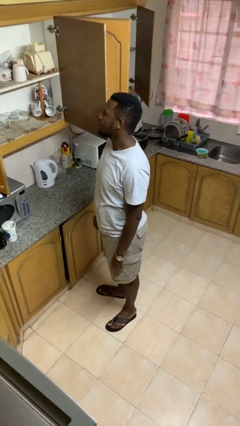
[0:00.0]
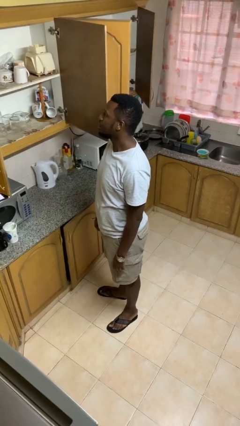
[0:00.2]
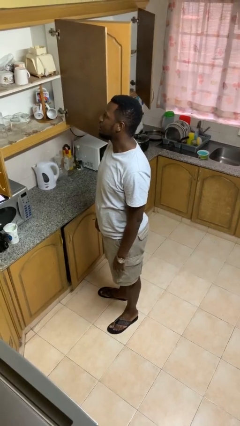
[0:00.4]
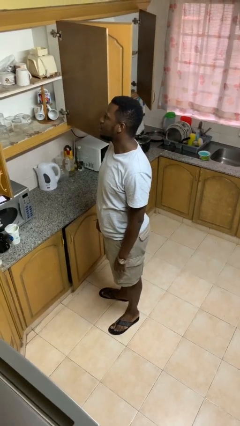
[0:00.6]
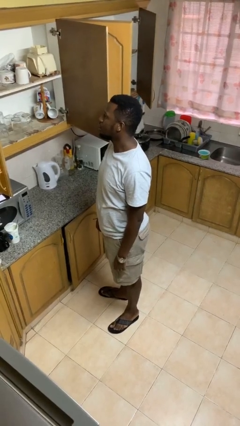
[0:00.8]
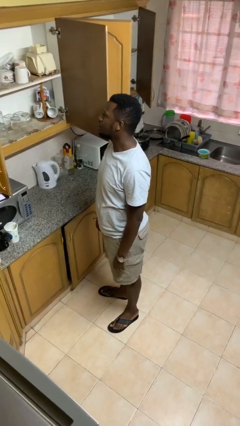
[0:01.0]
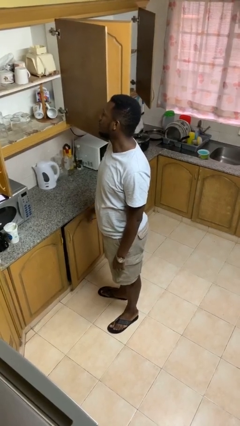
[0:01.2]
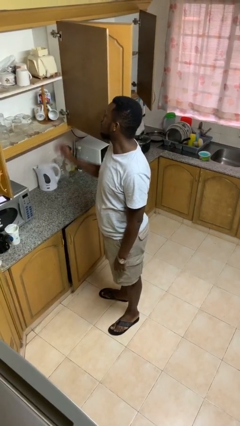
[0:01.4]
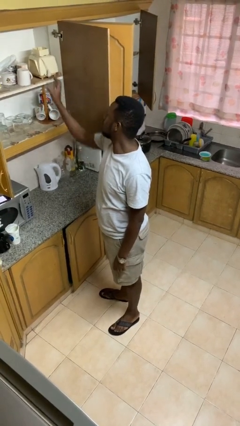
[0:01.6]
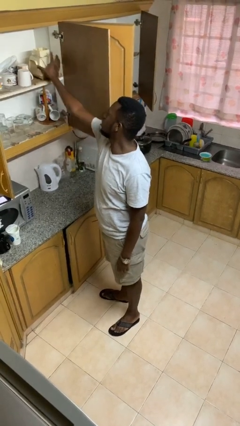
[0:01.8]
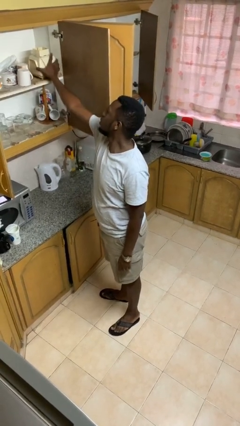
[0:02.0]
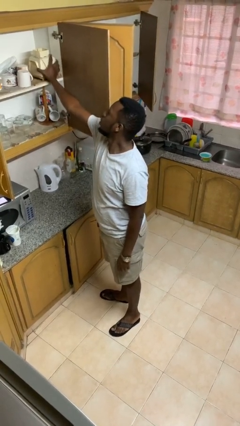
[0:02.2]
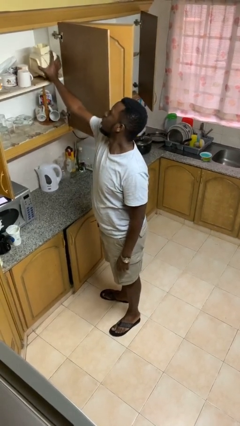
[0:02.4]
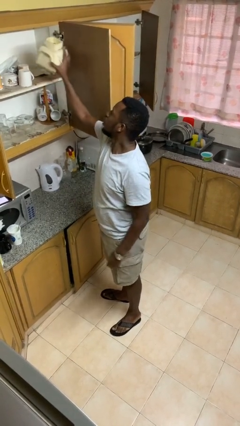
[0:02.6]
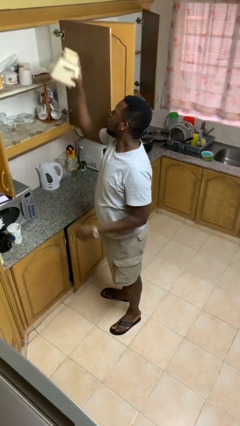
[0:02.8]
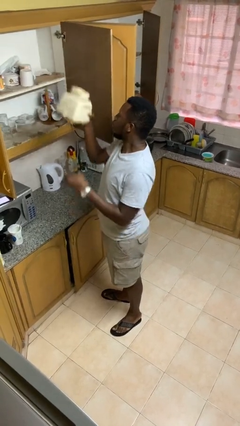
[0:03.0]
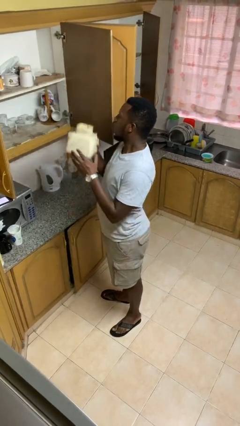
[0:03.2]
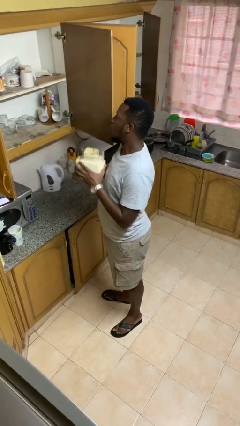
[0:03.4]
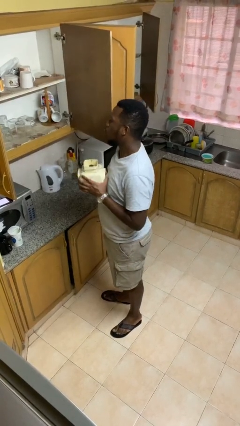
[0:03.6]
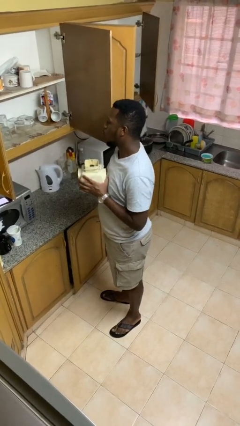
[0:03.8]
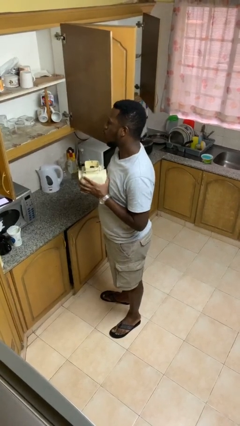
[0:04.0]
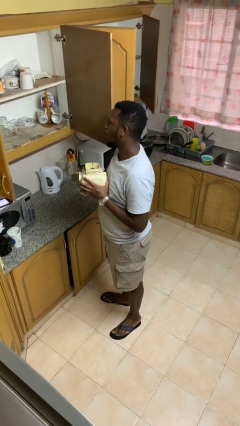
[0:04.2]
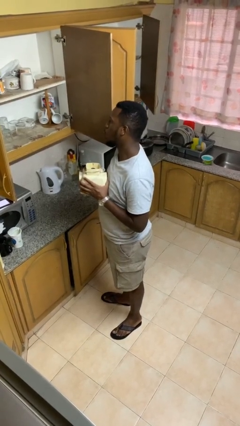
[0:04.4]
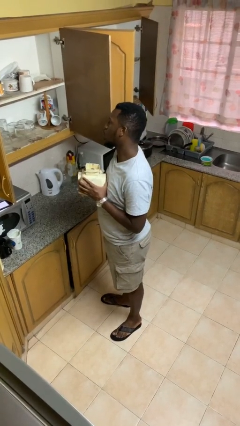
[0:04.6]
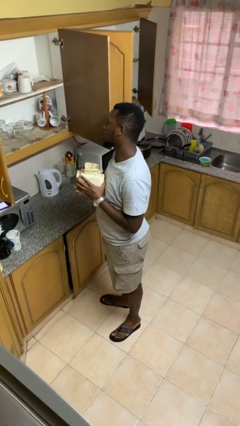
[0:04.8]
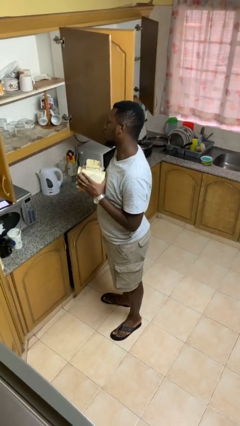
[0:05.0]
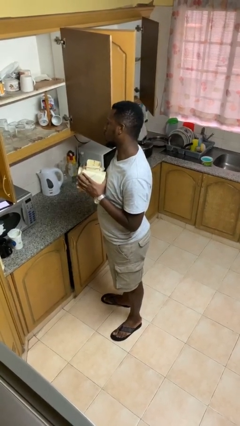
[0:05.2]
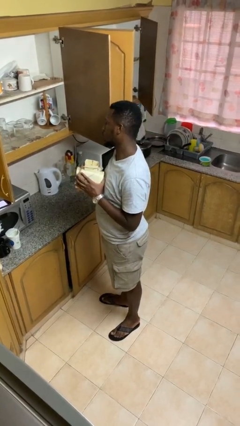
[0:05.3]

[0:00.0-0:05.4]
person picks up object from shelf

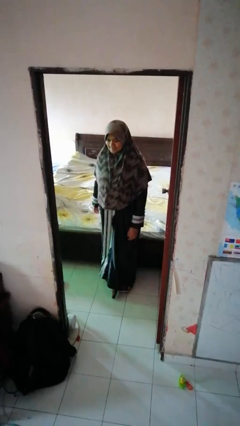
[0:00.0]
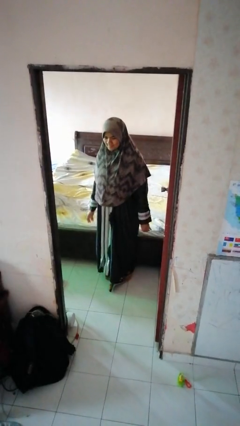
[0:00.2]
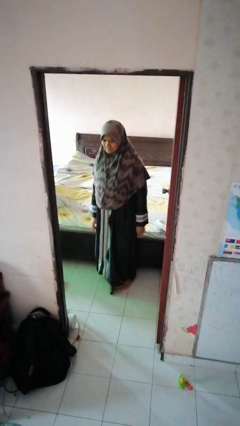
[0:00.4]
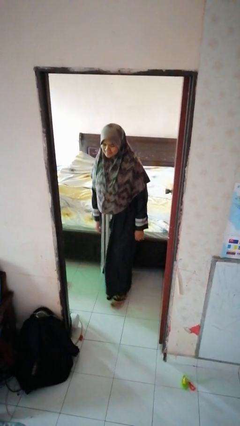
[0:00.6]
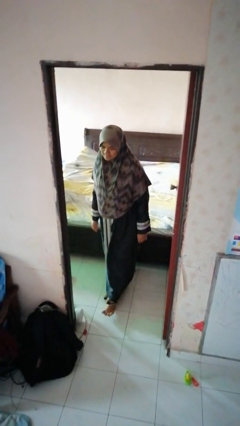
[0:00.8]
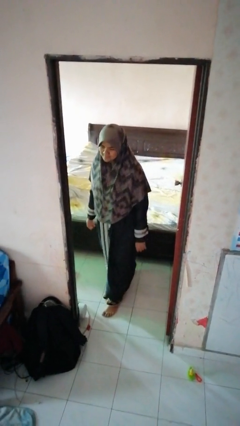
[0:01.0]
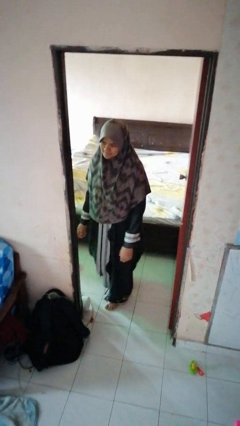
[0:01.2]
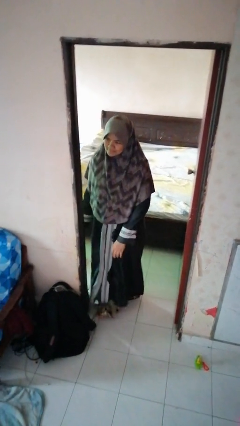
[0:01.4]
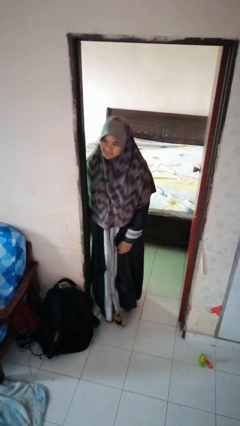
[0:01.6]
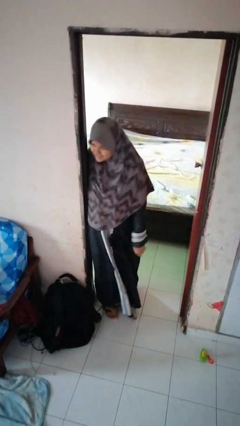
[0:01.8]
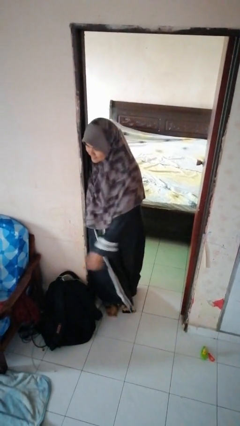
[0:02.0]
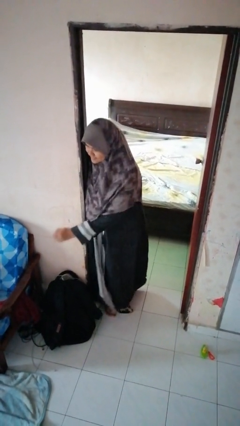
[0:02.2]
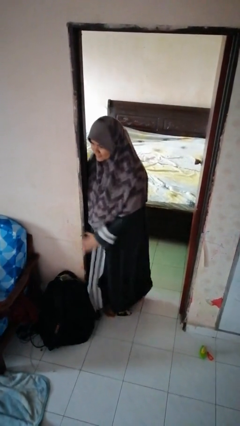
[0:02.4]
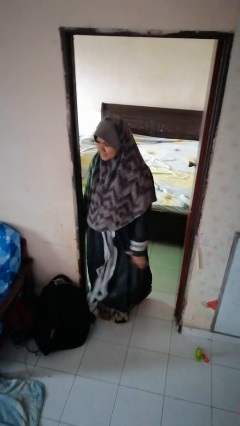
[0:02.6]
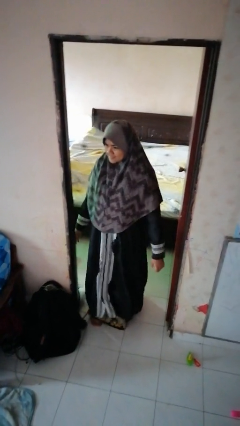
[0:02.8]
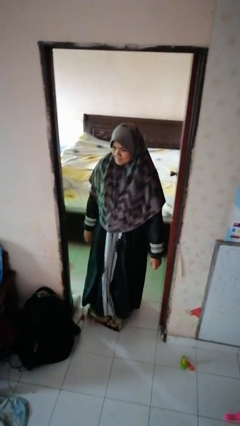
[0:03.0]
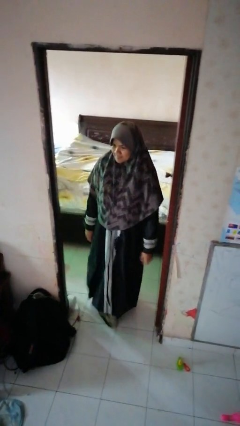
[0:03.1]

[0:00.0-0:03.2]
person bumps into wall

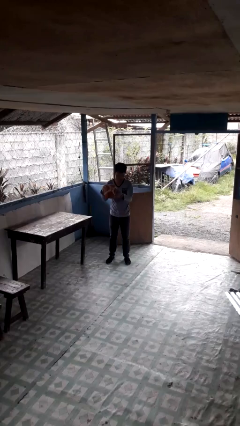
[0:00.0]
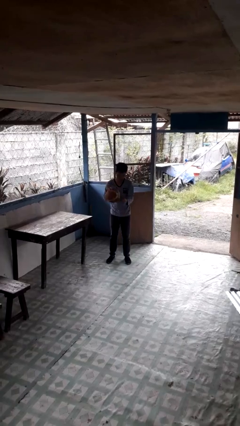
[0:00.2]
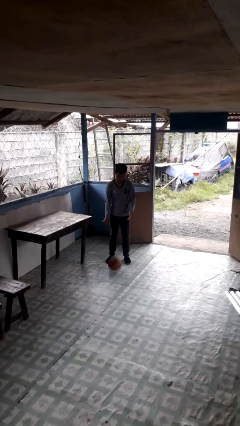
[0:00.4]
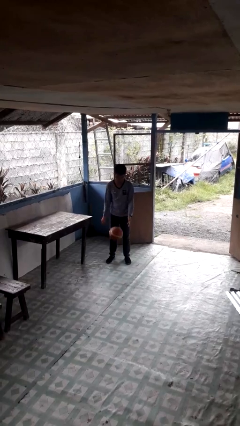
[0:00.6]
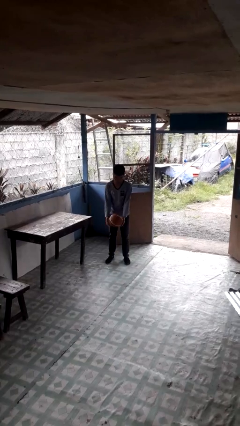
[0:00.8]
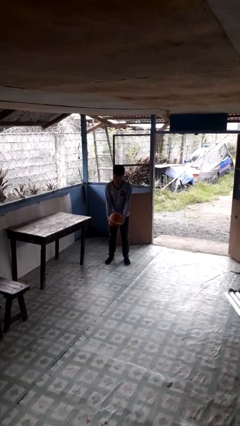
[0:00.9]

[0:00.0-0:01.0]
person bounces ball on floor

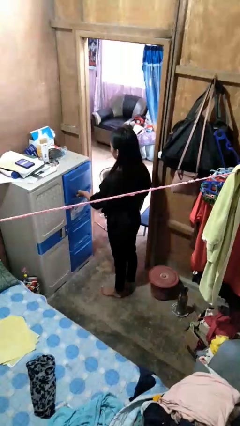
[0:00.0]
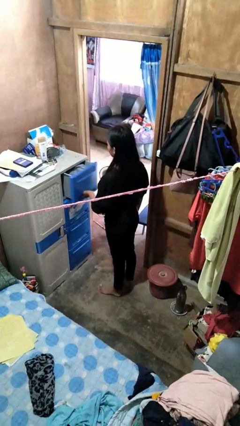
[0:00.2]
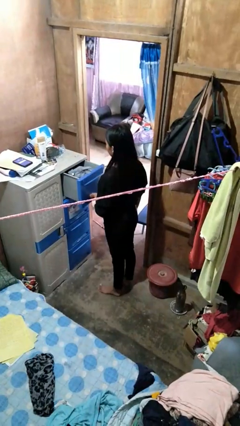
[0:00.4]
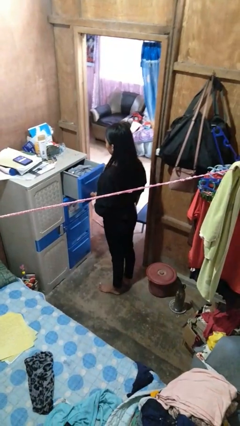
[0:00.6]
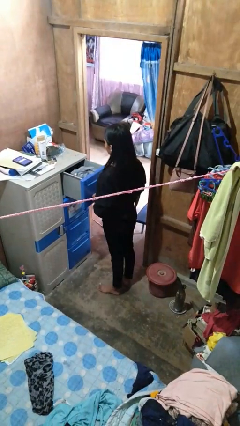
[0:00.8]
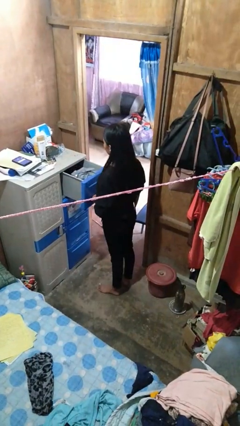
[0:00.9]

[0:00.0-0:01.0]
person opens dresser drawer

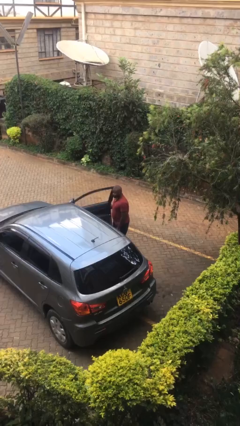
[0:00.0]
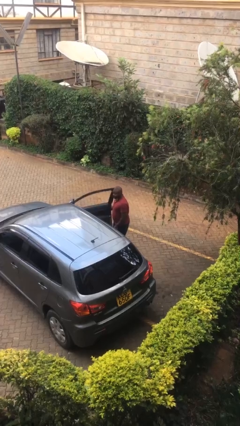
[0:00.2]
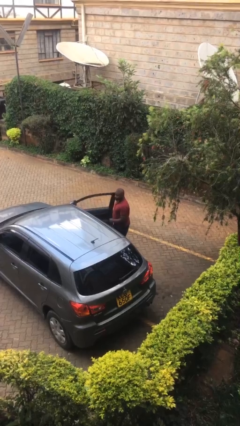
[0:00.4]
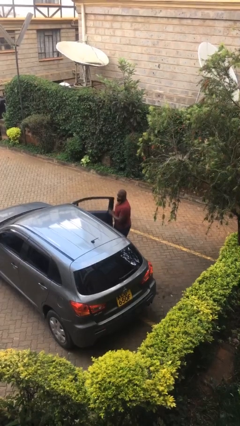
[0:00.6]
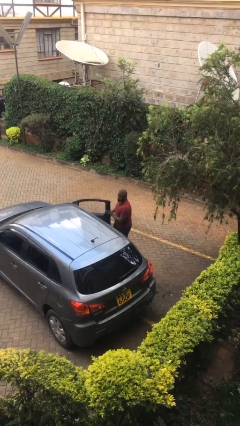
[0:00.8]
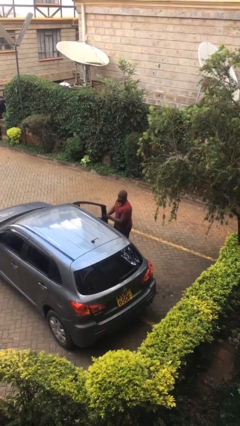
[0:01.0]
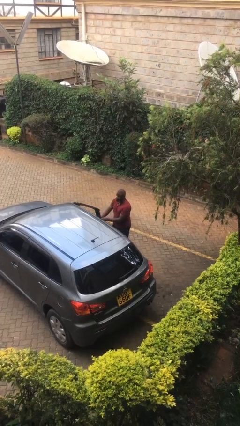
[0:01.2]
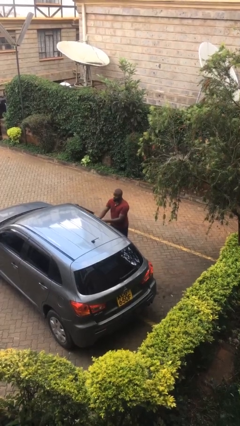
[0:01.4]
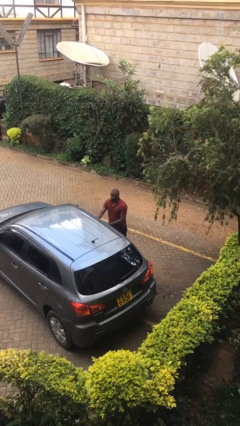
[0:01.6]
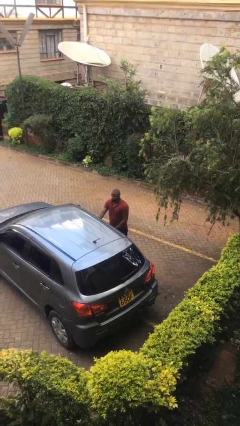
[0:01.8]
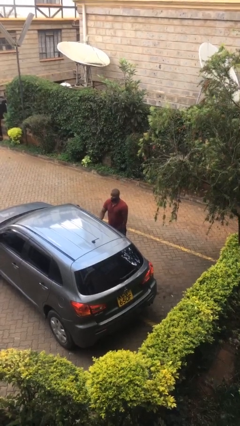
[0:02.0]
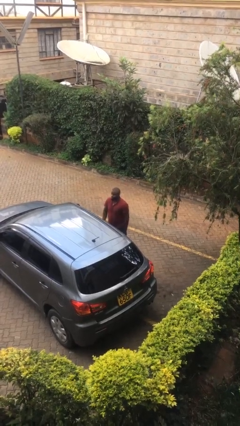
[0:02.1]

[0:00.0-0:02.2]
person closes car door

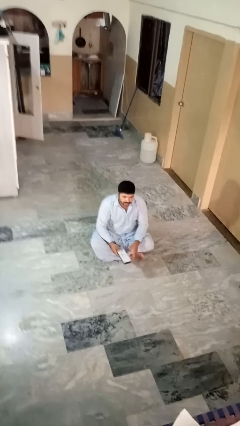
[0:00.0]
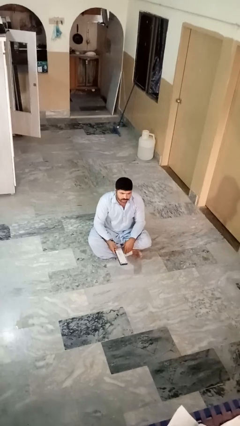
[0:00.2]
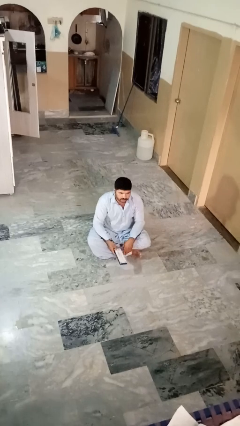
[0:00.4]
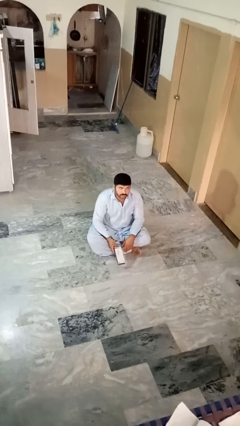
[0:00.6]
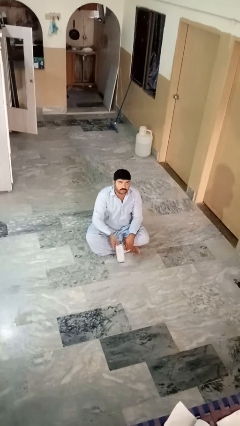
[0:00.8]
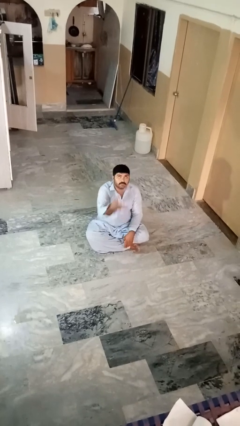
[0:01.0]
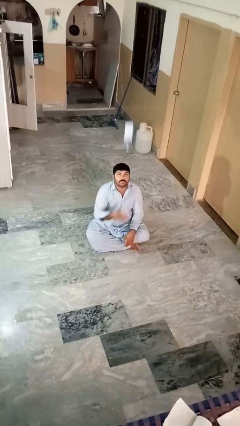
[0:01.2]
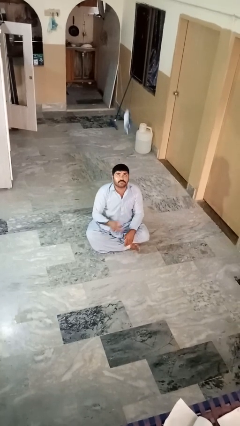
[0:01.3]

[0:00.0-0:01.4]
person drops object

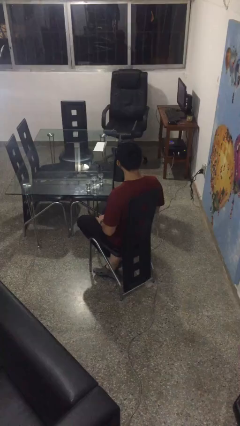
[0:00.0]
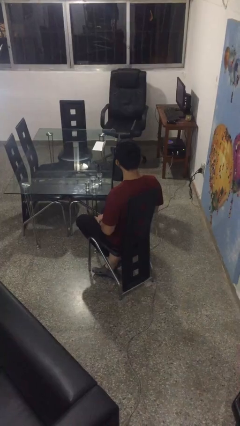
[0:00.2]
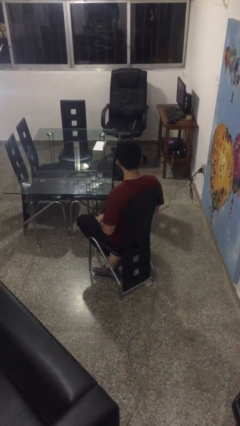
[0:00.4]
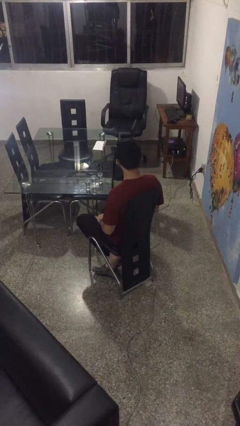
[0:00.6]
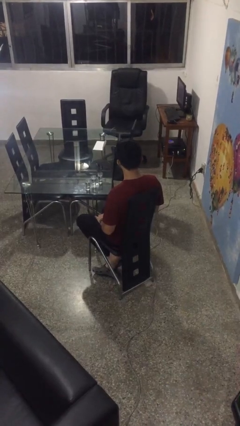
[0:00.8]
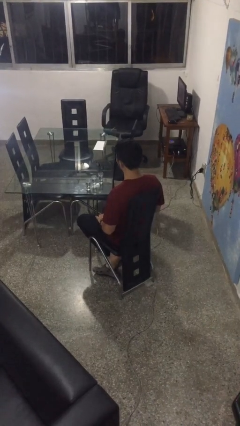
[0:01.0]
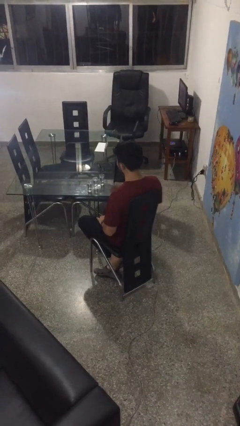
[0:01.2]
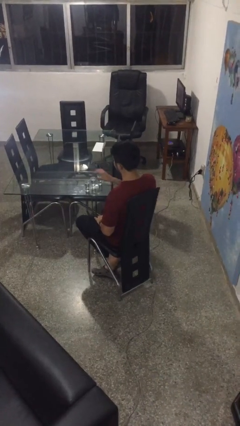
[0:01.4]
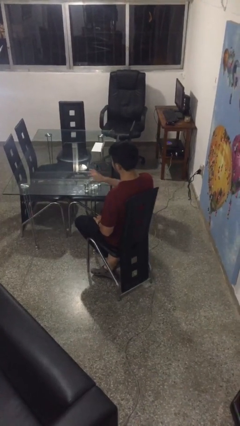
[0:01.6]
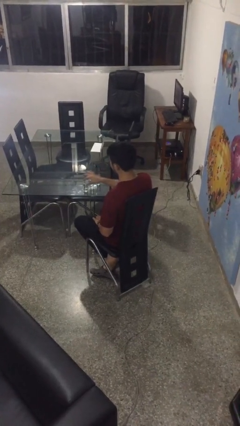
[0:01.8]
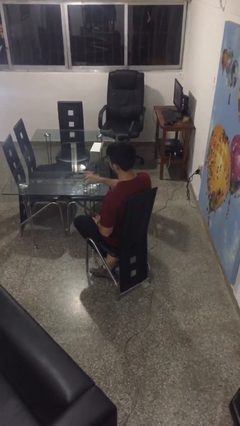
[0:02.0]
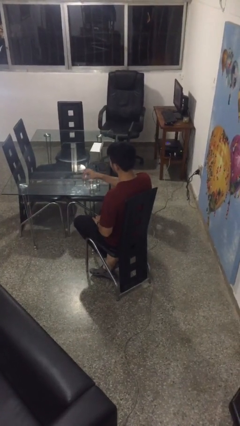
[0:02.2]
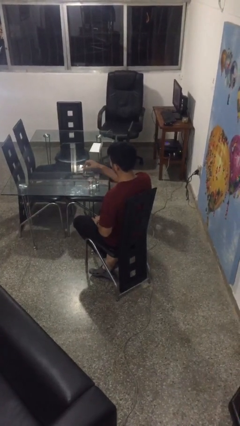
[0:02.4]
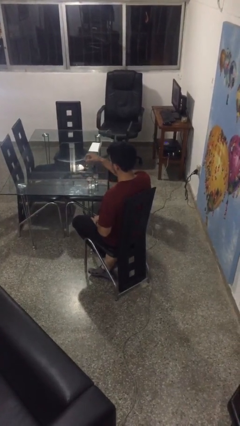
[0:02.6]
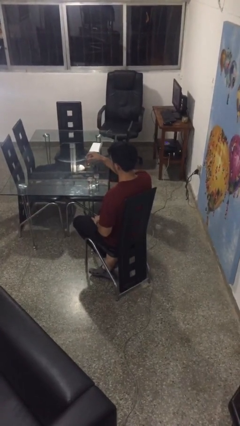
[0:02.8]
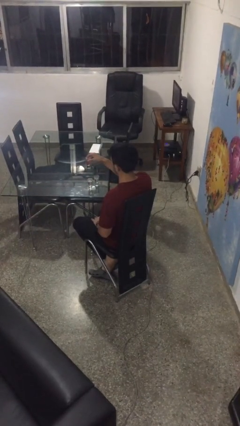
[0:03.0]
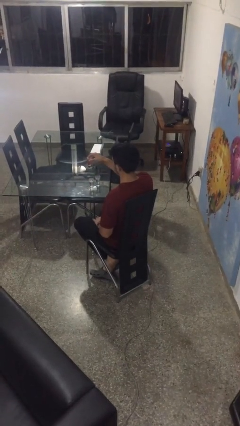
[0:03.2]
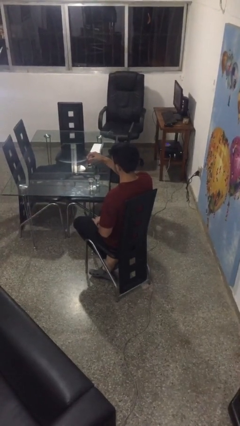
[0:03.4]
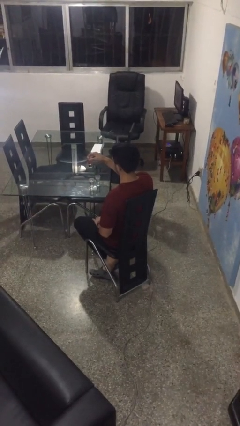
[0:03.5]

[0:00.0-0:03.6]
person picks up object from table
